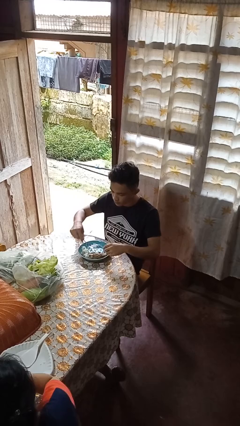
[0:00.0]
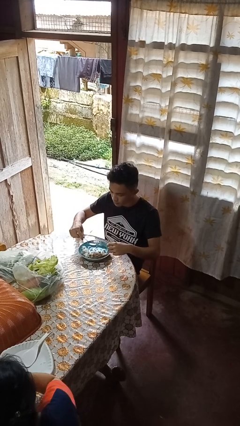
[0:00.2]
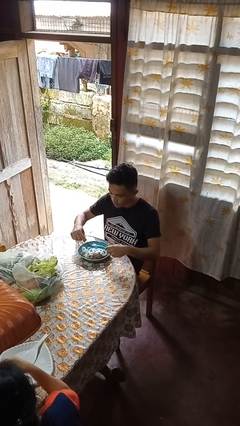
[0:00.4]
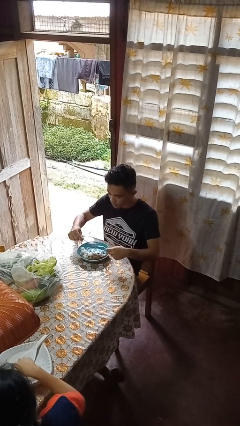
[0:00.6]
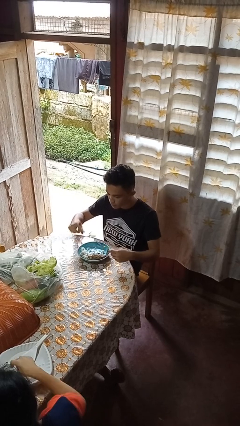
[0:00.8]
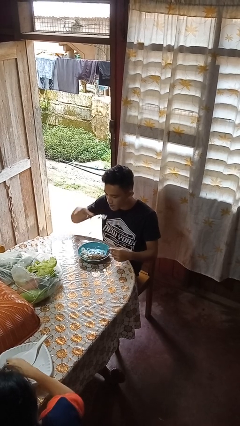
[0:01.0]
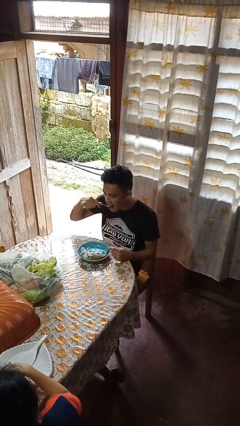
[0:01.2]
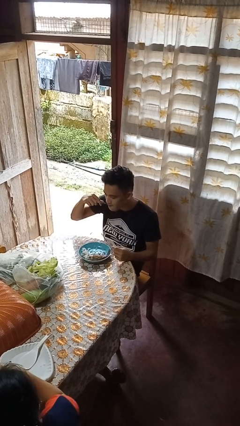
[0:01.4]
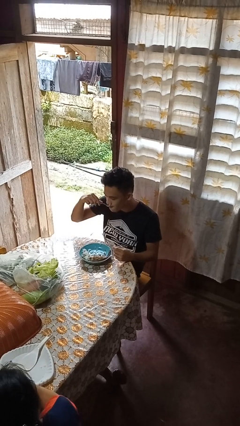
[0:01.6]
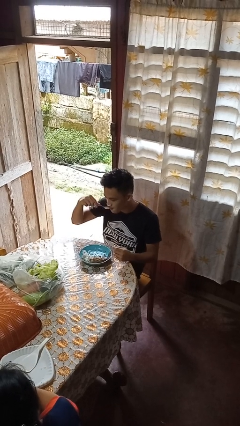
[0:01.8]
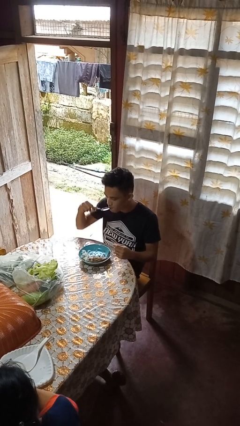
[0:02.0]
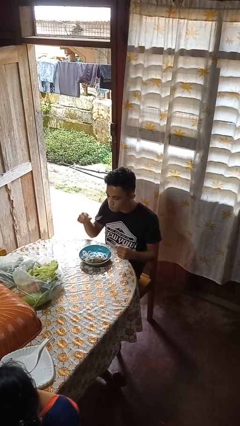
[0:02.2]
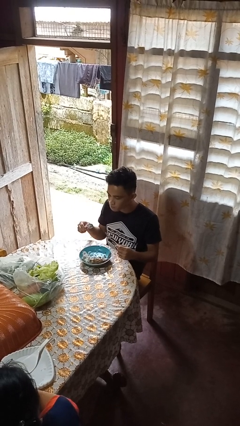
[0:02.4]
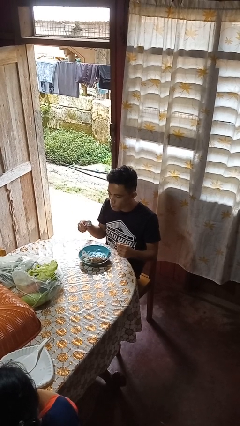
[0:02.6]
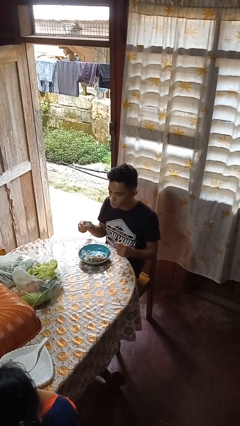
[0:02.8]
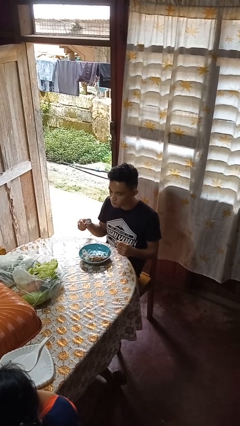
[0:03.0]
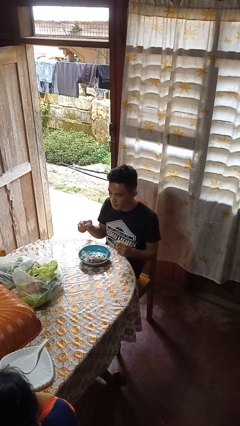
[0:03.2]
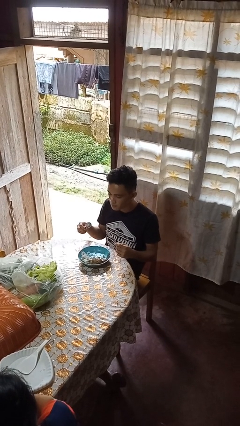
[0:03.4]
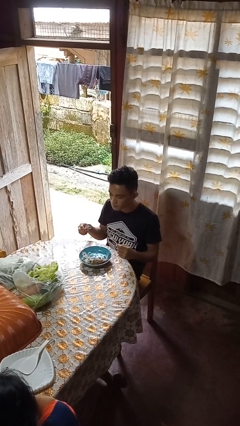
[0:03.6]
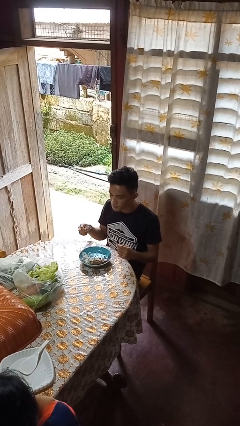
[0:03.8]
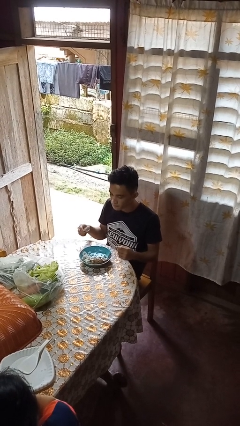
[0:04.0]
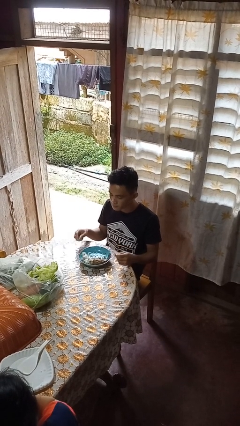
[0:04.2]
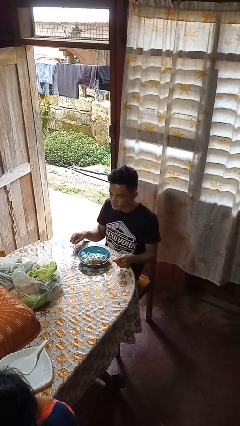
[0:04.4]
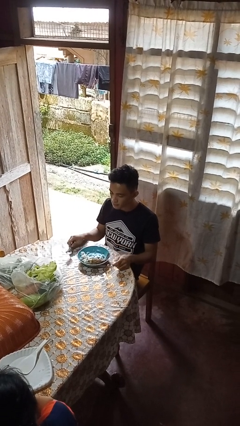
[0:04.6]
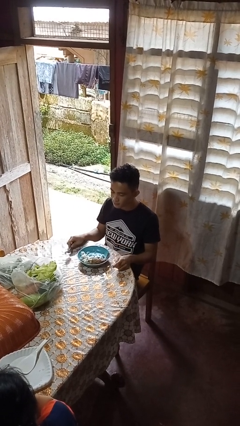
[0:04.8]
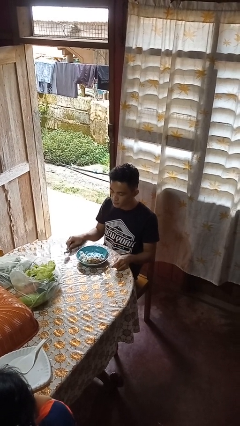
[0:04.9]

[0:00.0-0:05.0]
person eats with utensil

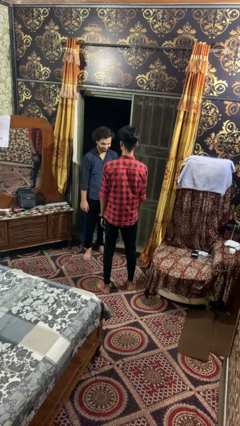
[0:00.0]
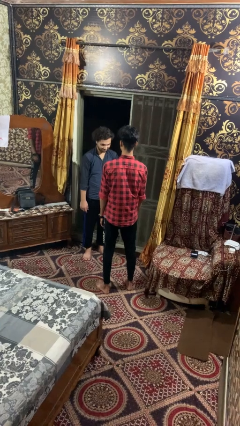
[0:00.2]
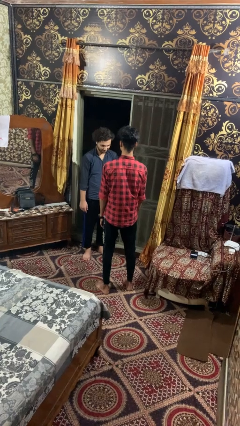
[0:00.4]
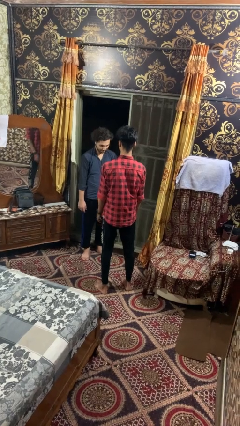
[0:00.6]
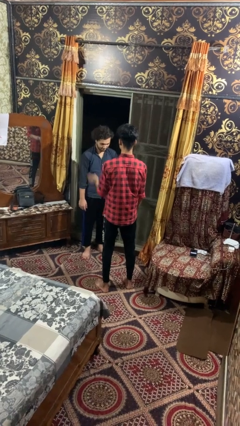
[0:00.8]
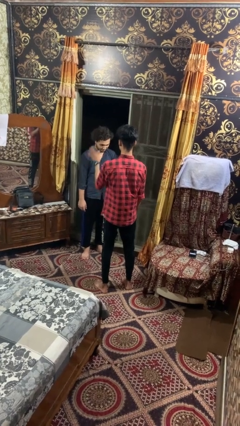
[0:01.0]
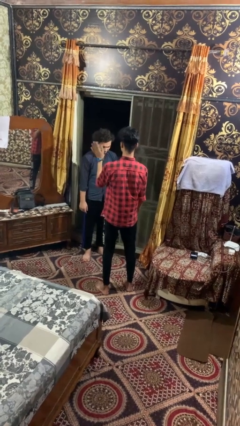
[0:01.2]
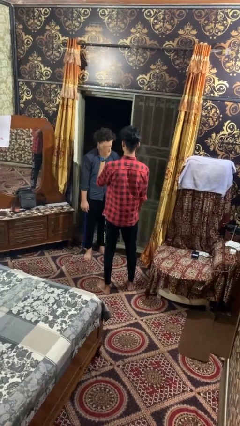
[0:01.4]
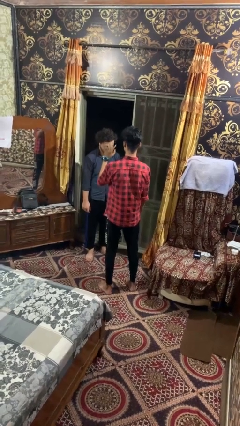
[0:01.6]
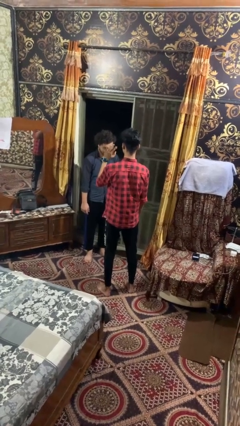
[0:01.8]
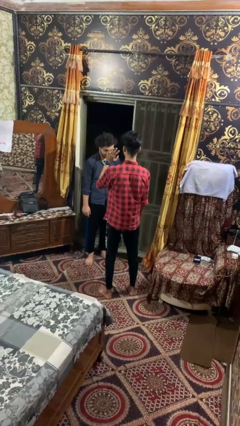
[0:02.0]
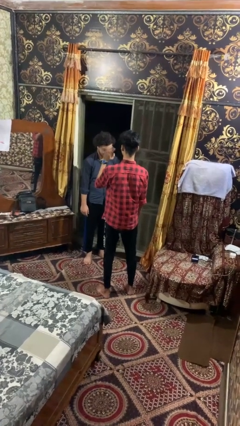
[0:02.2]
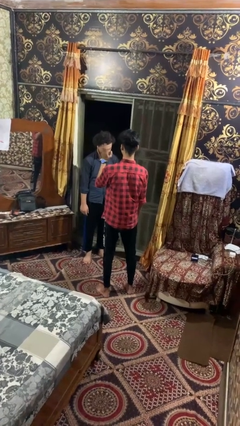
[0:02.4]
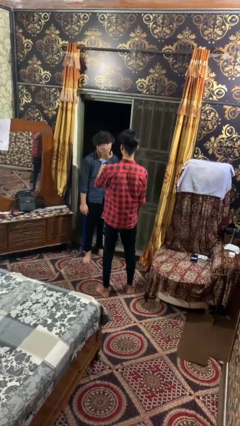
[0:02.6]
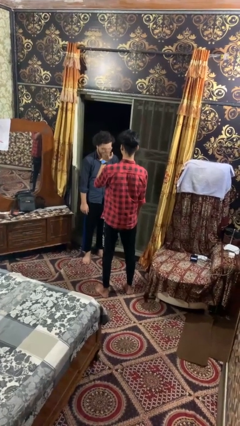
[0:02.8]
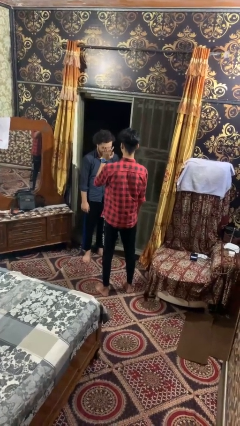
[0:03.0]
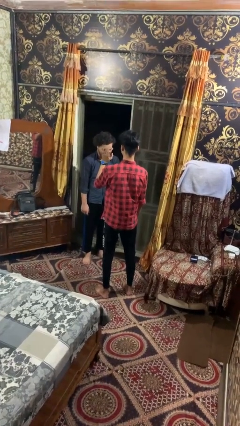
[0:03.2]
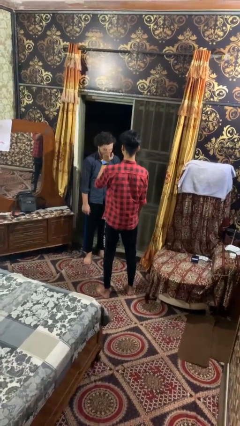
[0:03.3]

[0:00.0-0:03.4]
person waves at person

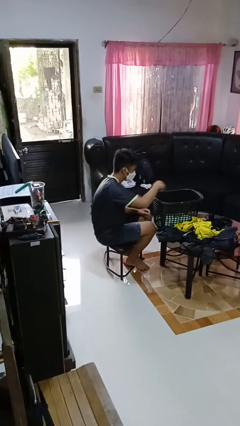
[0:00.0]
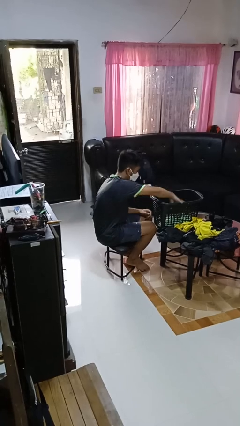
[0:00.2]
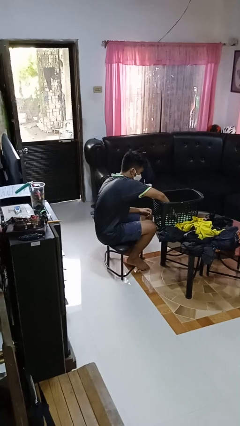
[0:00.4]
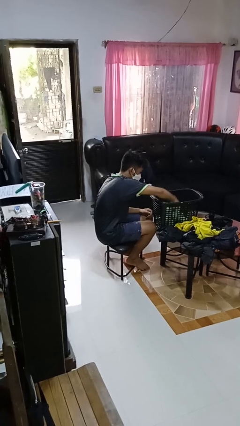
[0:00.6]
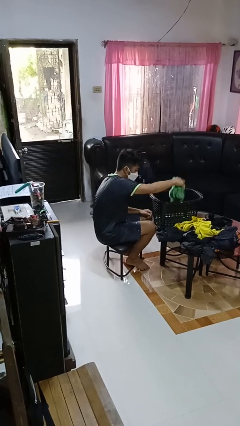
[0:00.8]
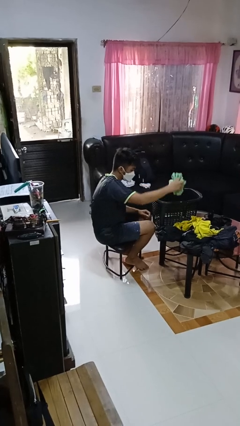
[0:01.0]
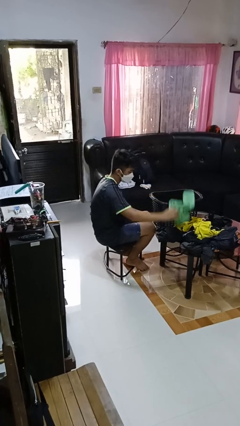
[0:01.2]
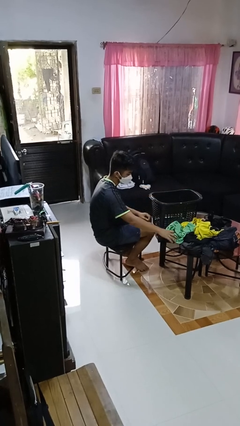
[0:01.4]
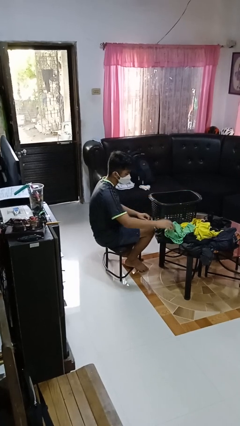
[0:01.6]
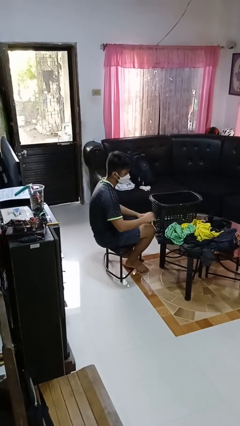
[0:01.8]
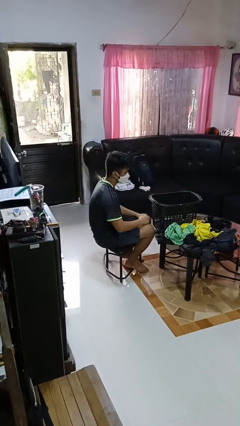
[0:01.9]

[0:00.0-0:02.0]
person takes object from basket

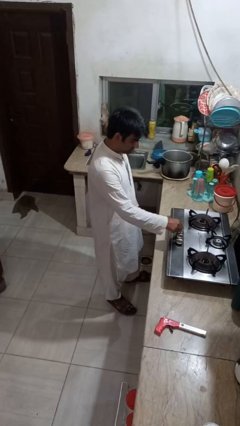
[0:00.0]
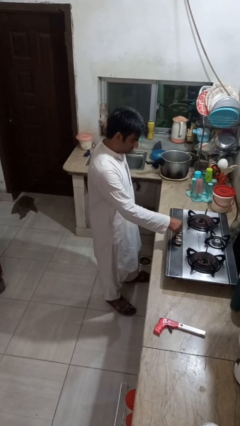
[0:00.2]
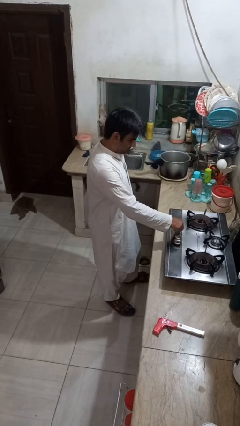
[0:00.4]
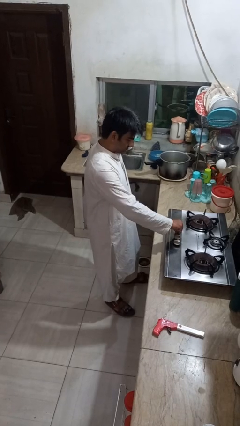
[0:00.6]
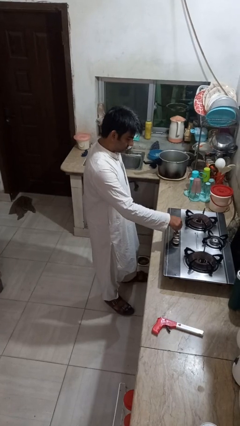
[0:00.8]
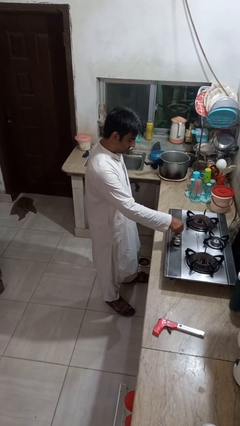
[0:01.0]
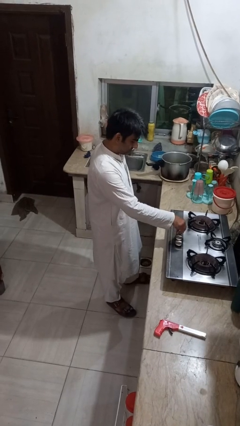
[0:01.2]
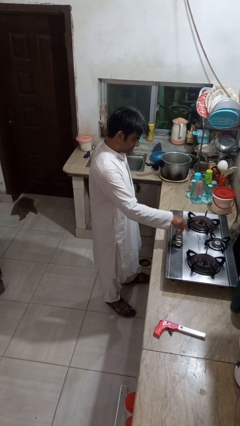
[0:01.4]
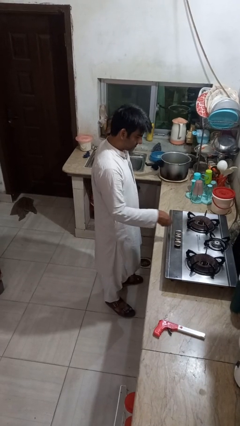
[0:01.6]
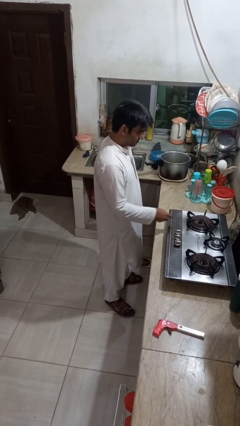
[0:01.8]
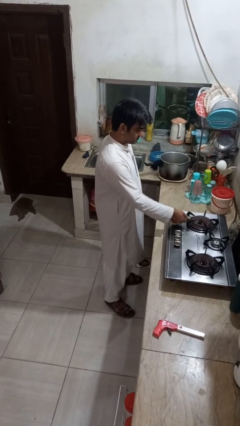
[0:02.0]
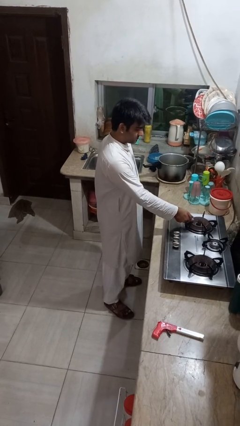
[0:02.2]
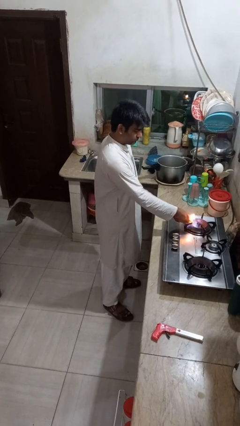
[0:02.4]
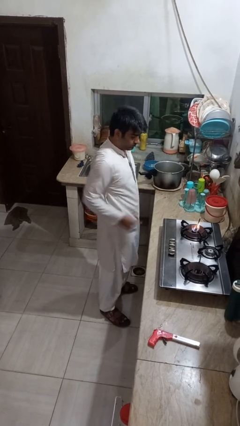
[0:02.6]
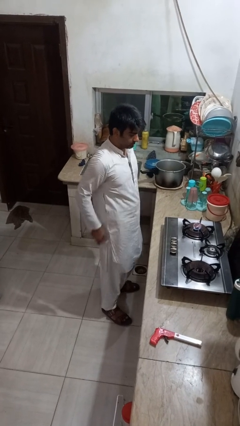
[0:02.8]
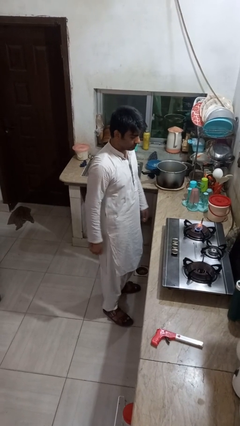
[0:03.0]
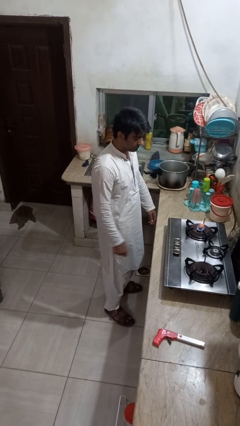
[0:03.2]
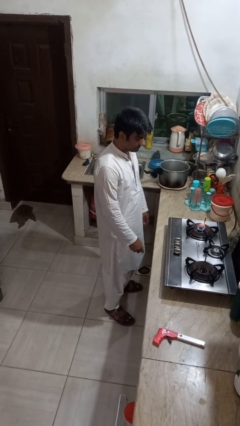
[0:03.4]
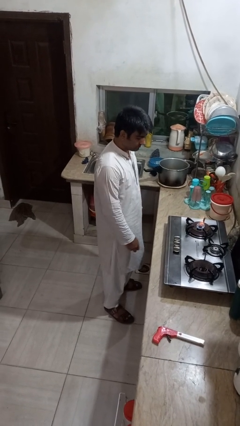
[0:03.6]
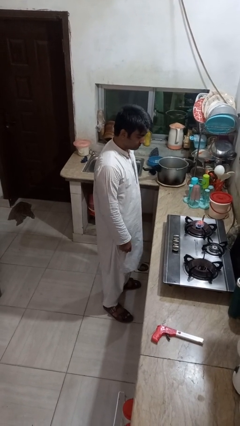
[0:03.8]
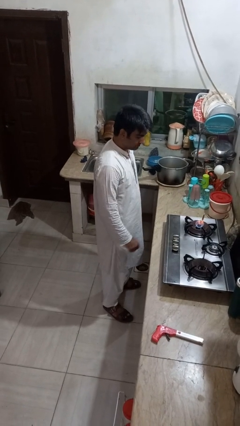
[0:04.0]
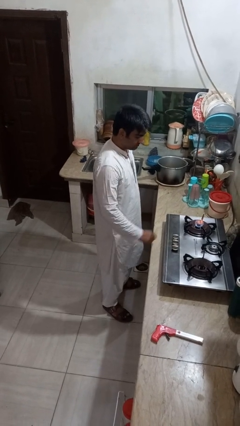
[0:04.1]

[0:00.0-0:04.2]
person turns on stovetop

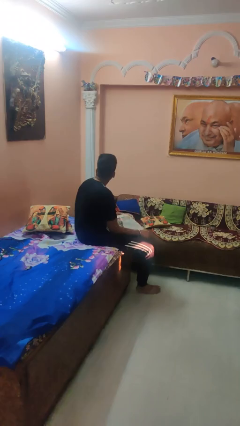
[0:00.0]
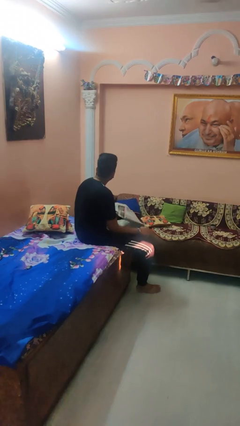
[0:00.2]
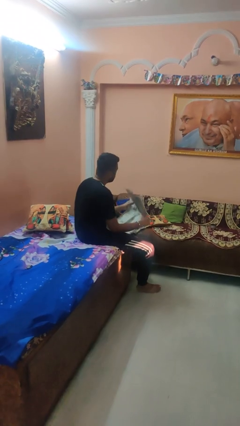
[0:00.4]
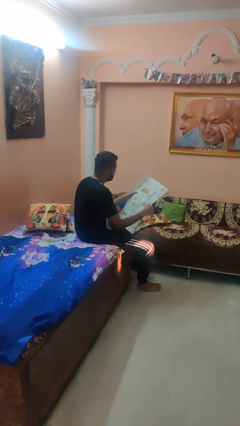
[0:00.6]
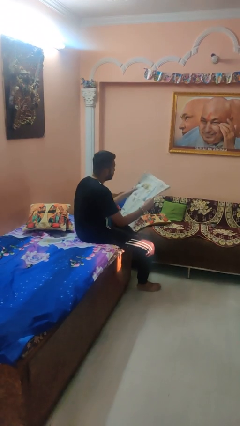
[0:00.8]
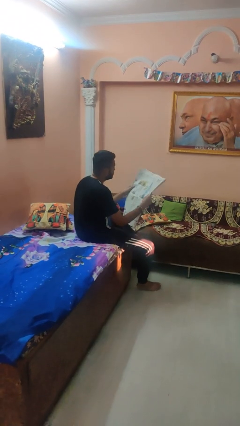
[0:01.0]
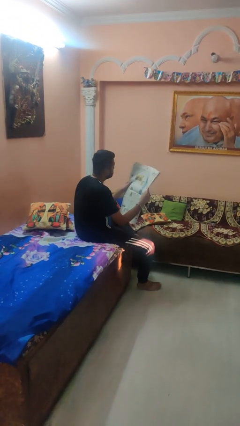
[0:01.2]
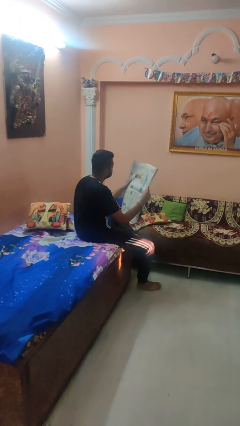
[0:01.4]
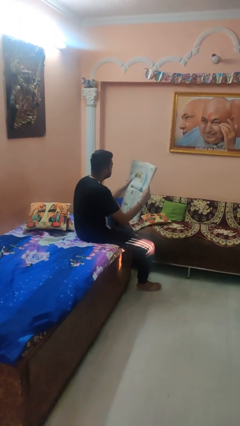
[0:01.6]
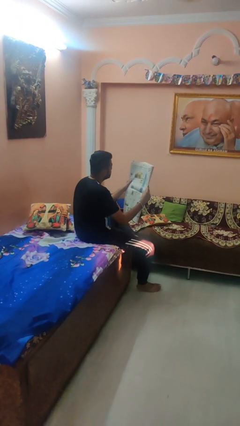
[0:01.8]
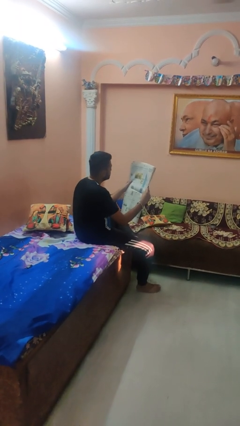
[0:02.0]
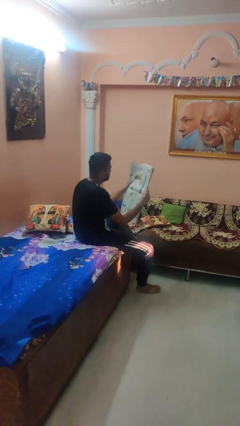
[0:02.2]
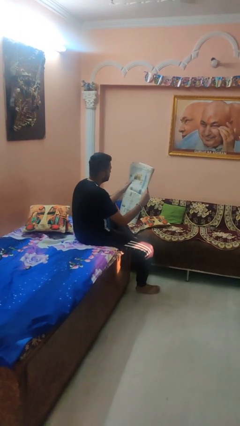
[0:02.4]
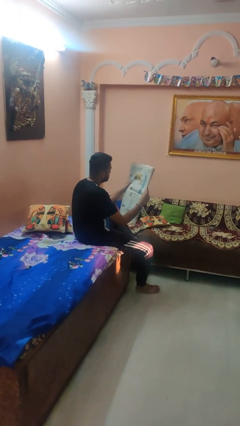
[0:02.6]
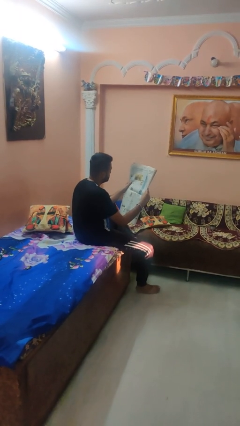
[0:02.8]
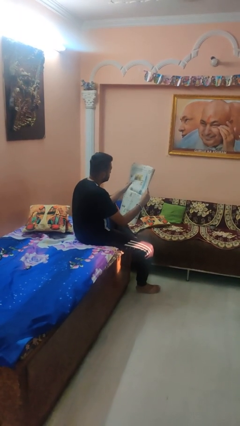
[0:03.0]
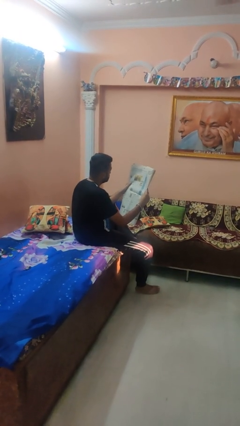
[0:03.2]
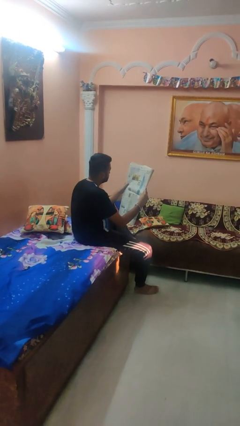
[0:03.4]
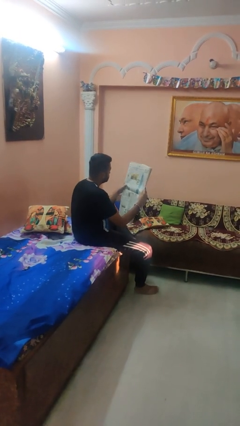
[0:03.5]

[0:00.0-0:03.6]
person reads newspaper
